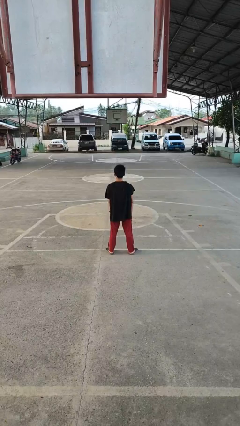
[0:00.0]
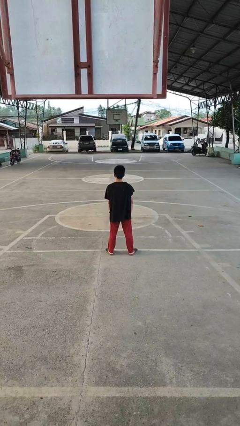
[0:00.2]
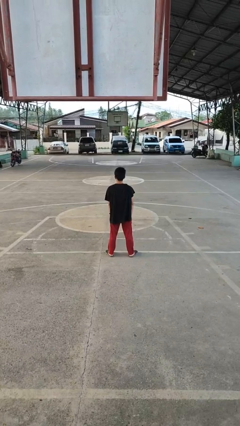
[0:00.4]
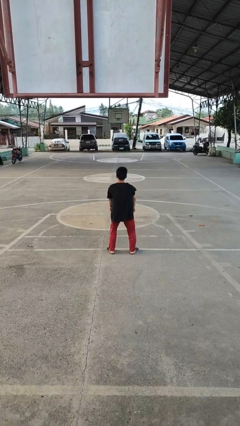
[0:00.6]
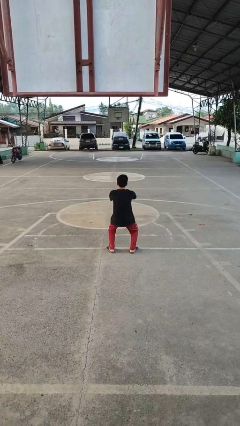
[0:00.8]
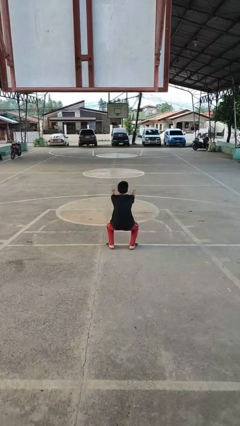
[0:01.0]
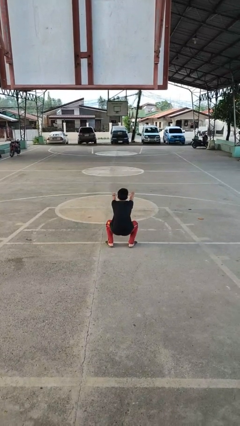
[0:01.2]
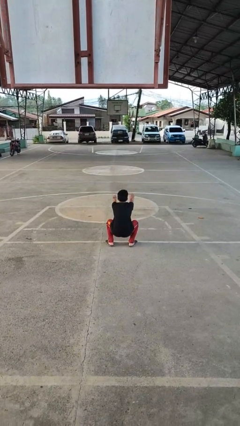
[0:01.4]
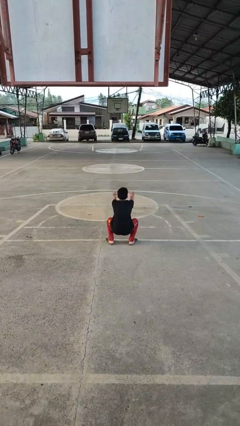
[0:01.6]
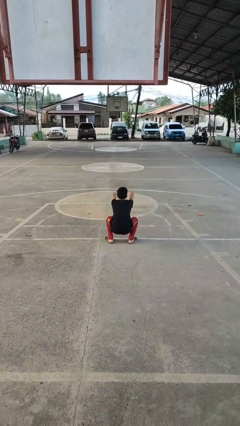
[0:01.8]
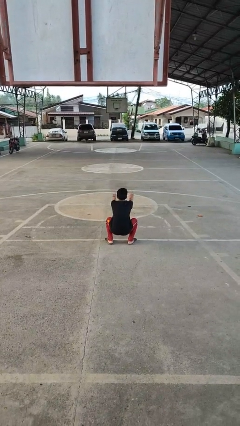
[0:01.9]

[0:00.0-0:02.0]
person squats

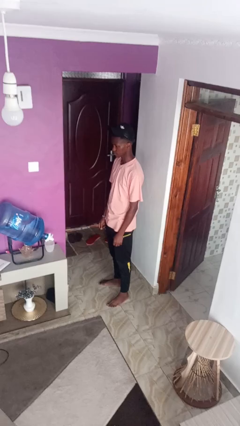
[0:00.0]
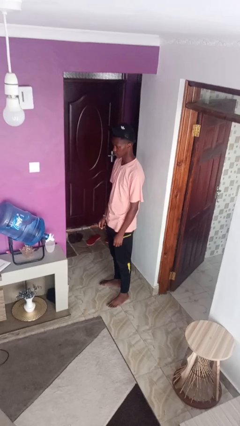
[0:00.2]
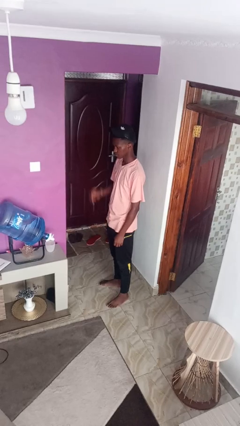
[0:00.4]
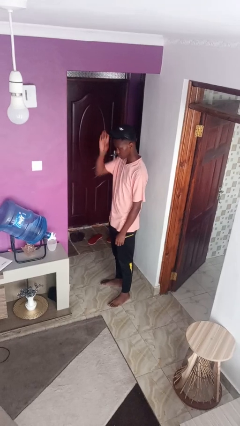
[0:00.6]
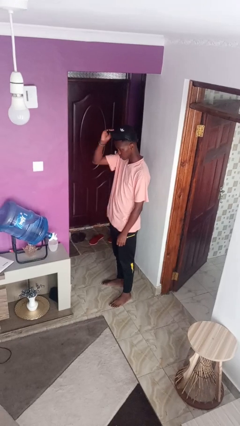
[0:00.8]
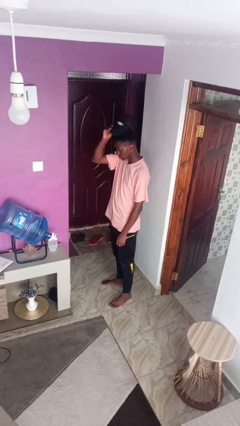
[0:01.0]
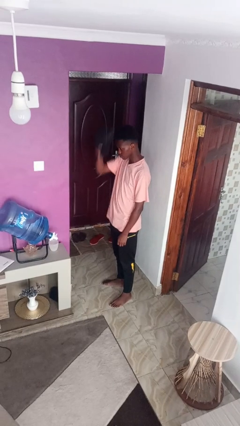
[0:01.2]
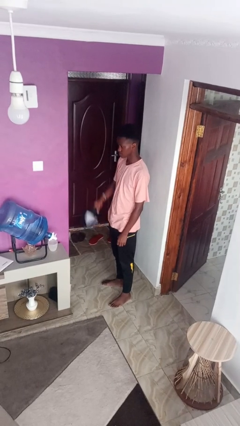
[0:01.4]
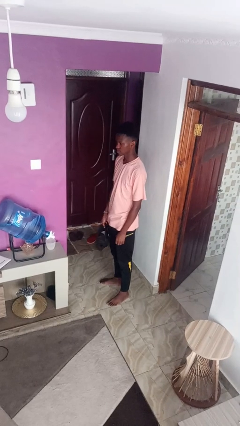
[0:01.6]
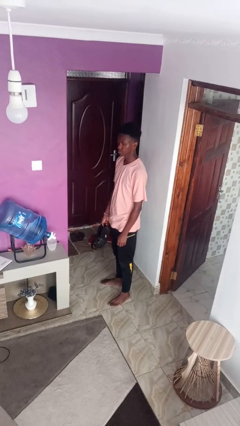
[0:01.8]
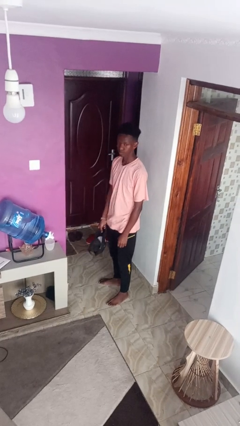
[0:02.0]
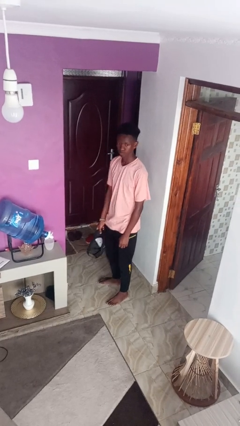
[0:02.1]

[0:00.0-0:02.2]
person takes off hat

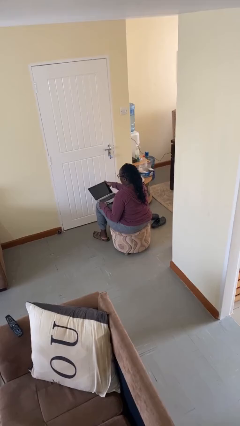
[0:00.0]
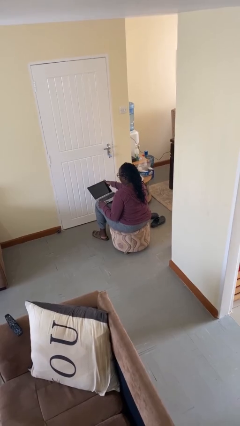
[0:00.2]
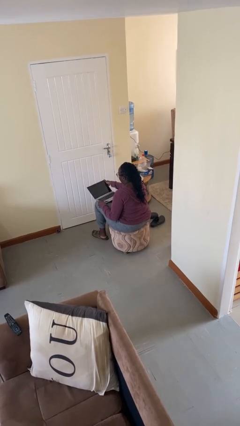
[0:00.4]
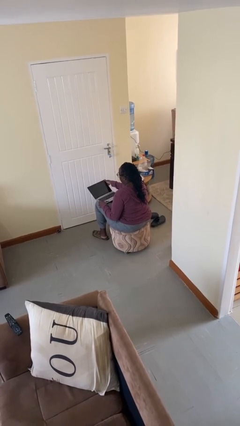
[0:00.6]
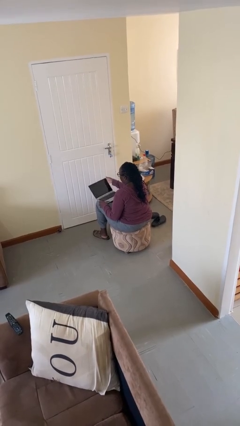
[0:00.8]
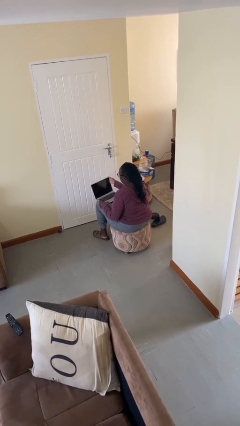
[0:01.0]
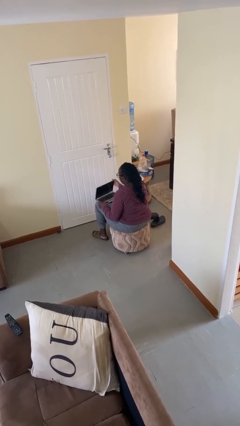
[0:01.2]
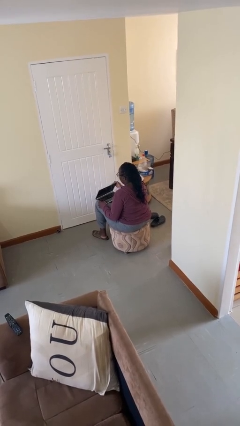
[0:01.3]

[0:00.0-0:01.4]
person closes laptop

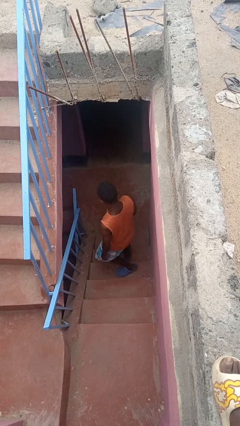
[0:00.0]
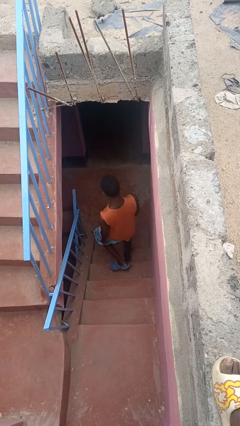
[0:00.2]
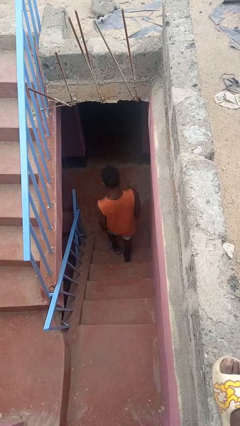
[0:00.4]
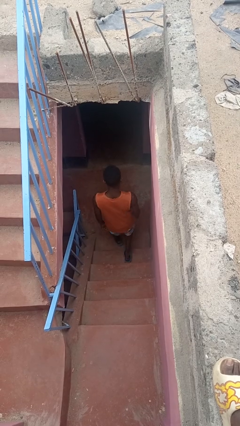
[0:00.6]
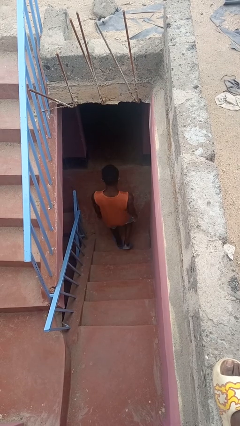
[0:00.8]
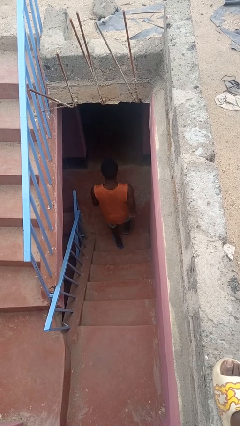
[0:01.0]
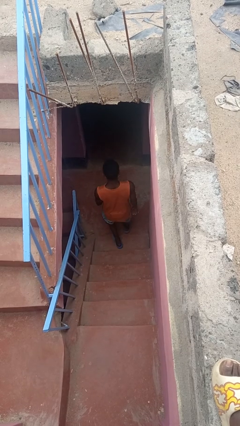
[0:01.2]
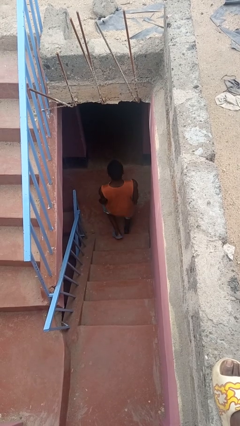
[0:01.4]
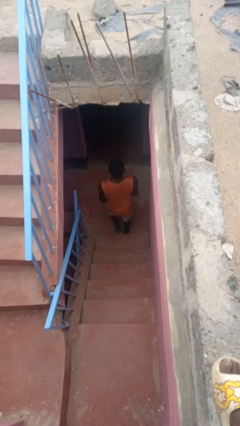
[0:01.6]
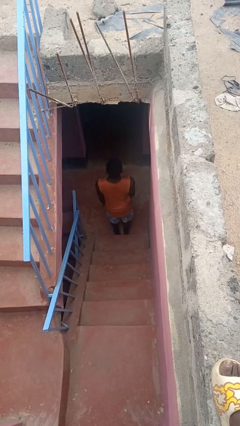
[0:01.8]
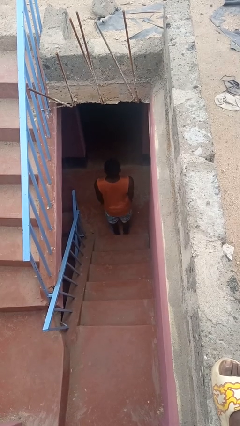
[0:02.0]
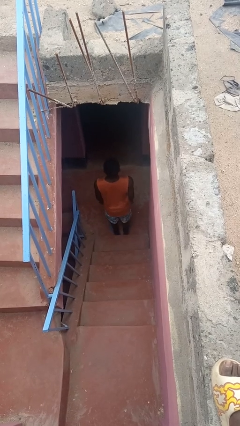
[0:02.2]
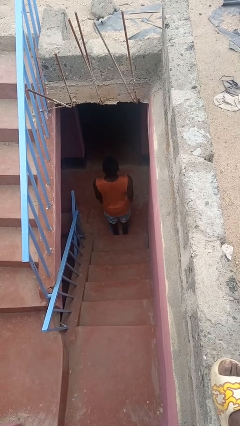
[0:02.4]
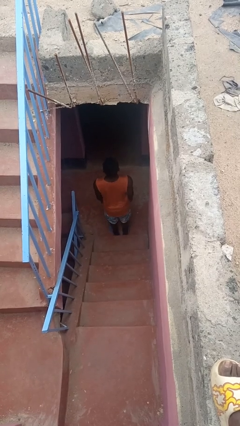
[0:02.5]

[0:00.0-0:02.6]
person climbs down stairs

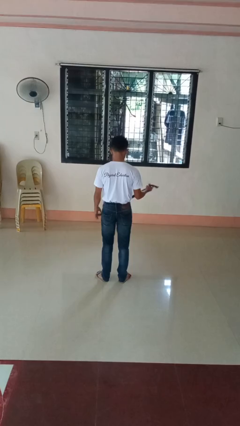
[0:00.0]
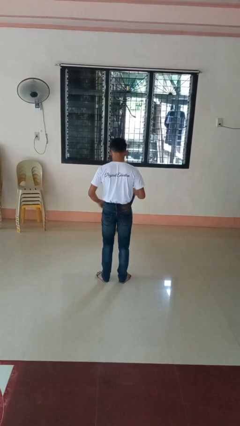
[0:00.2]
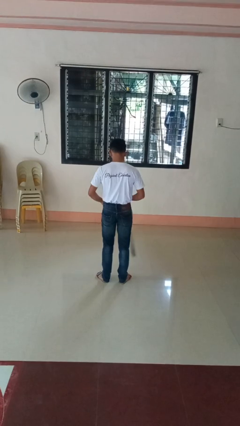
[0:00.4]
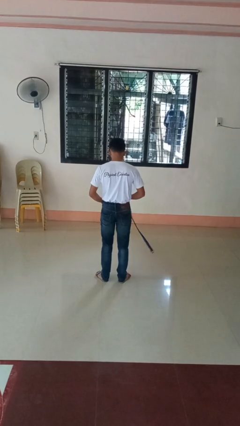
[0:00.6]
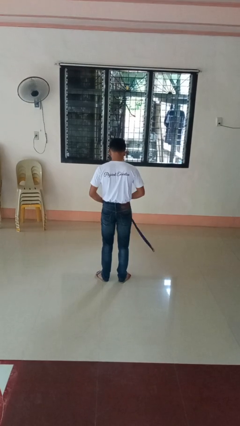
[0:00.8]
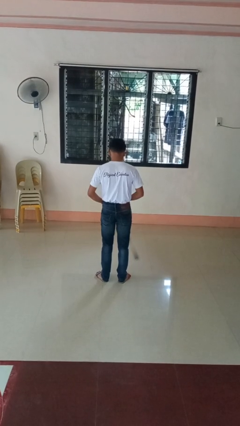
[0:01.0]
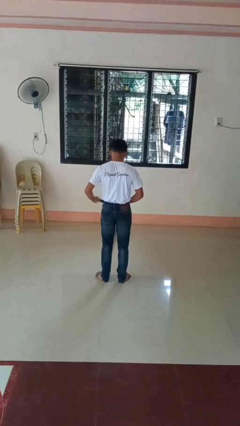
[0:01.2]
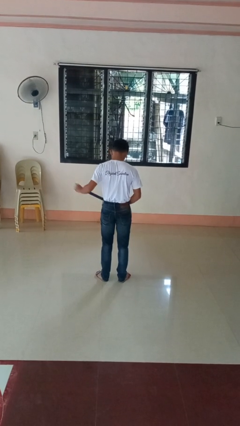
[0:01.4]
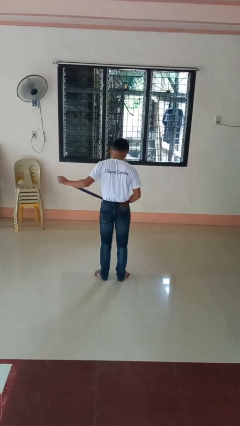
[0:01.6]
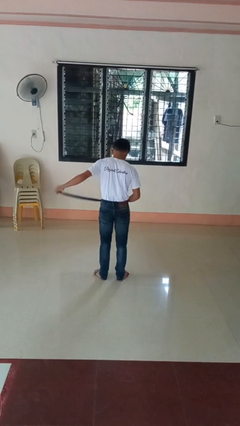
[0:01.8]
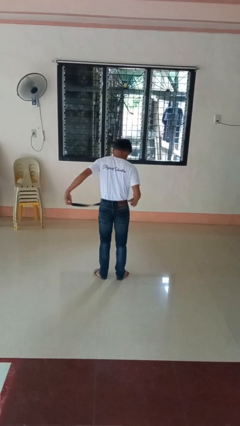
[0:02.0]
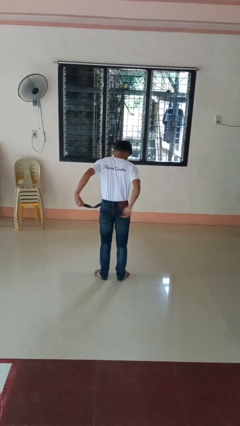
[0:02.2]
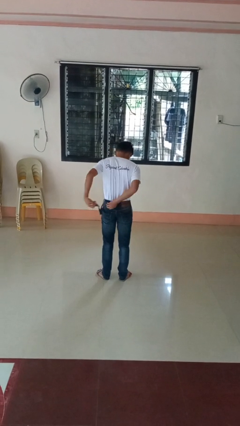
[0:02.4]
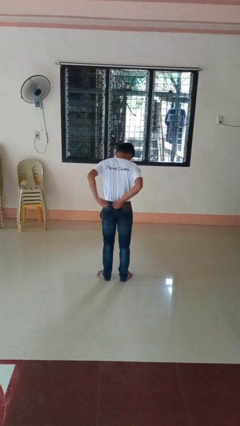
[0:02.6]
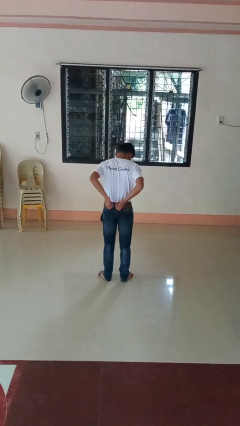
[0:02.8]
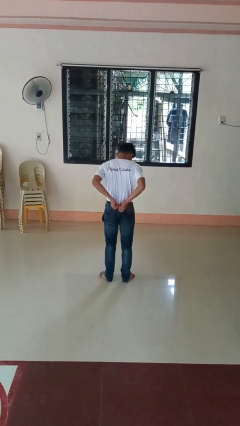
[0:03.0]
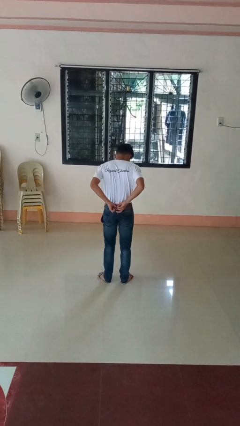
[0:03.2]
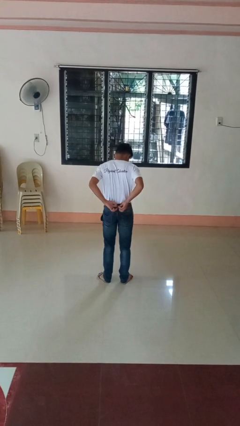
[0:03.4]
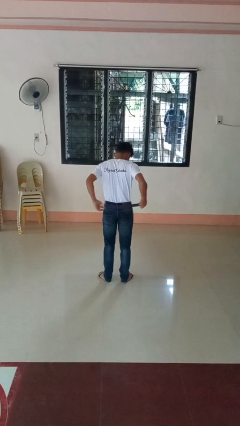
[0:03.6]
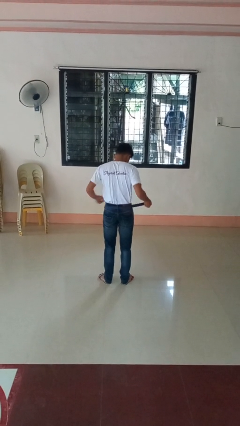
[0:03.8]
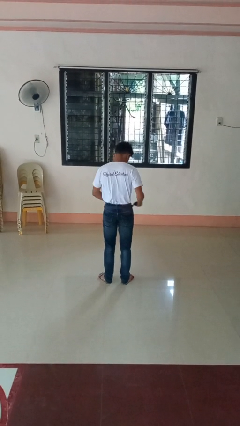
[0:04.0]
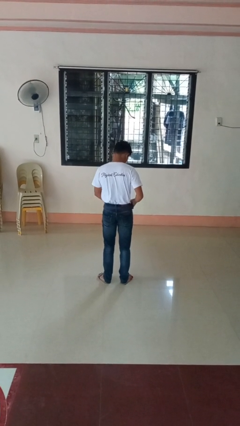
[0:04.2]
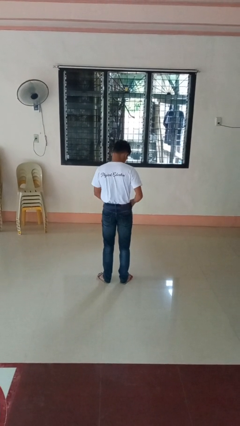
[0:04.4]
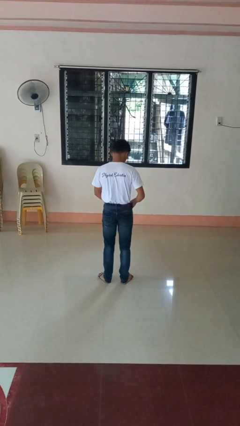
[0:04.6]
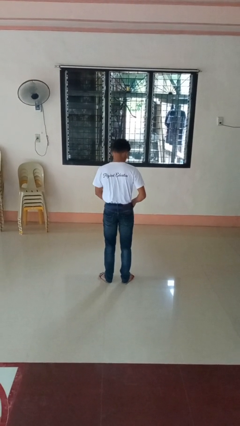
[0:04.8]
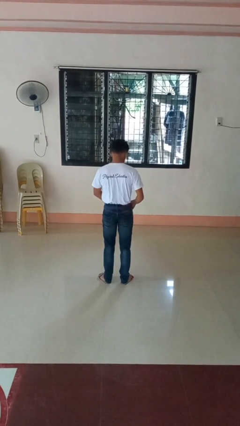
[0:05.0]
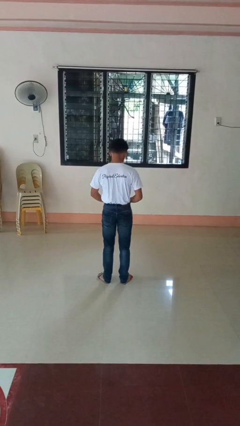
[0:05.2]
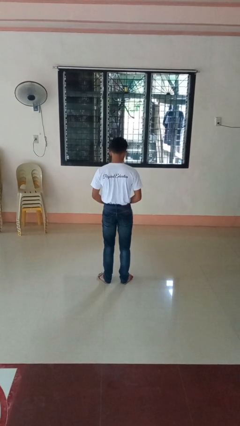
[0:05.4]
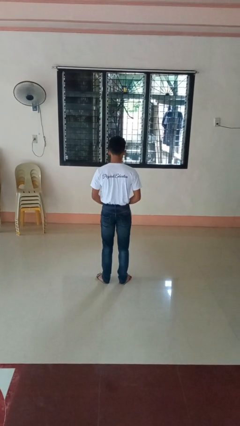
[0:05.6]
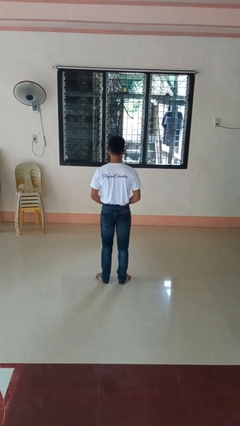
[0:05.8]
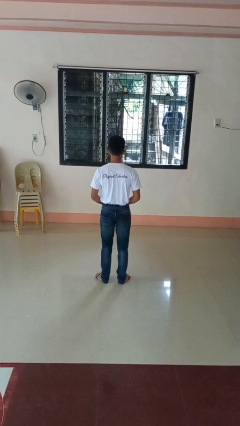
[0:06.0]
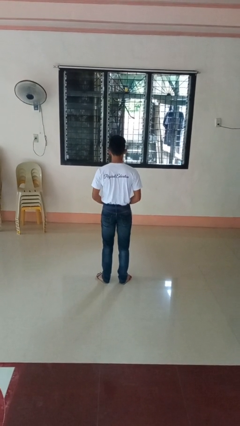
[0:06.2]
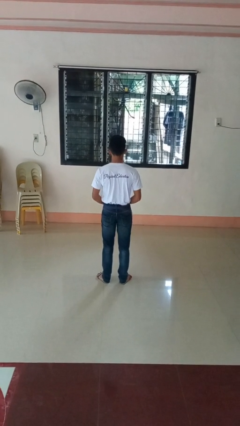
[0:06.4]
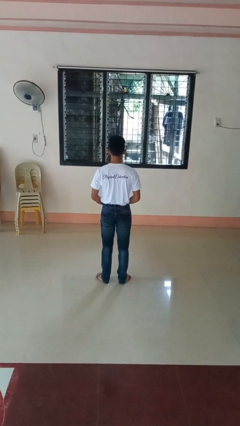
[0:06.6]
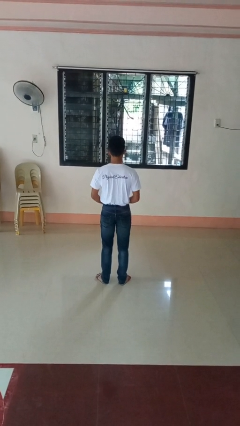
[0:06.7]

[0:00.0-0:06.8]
person puts on belt

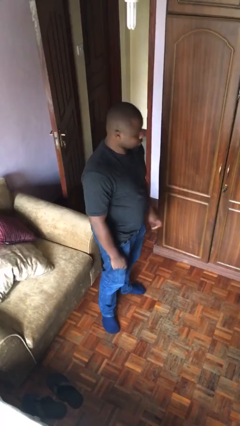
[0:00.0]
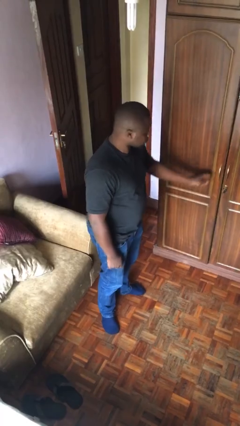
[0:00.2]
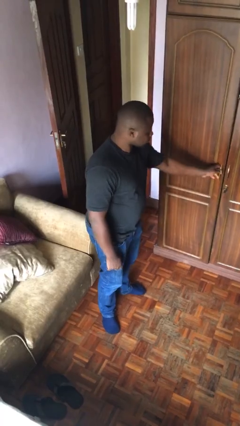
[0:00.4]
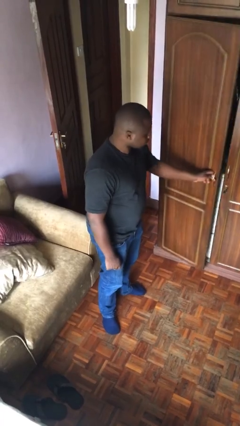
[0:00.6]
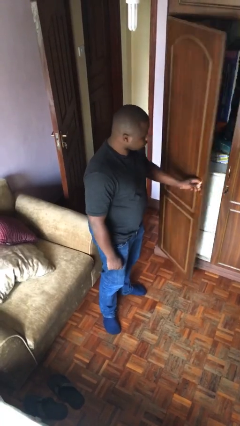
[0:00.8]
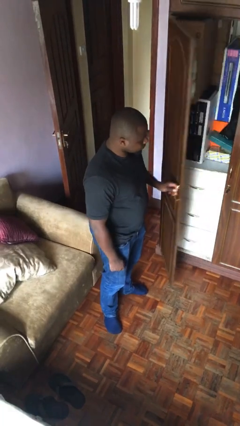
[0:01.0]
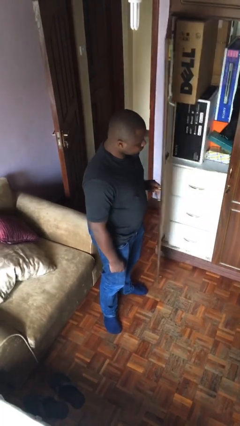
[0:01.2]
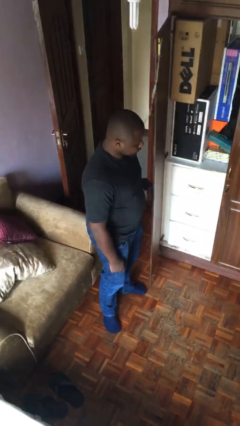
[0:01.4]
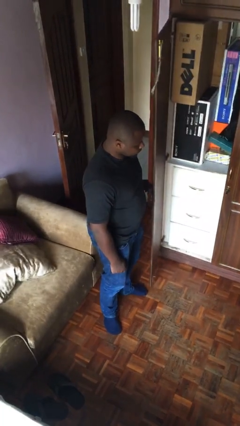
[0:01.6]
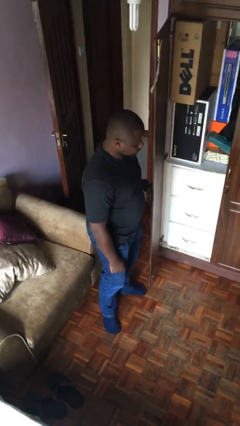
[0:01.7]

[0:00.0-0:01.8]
person opens dresser drawer

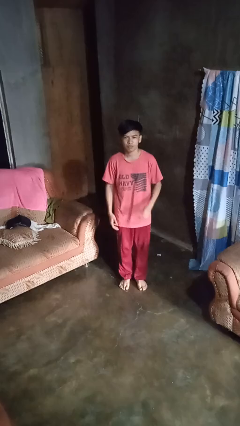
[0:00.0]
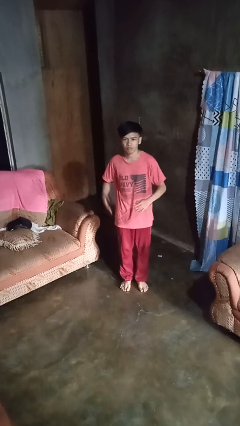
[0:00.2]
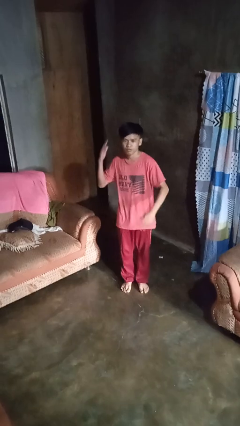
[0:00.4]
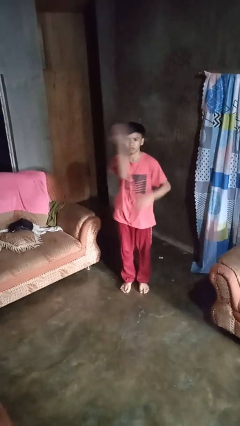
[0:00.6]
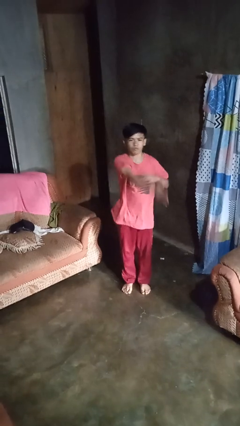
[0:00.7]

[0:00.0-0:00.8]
person karate chop
